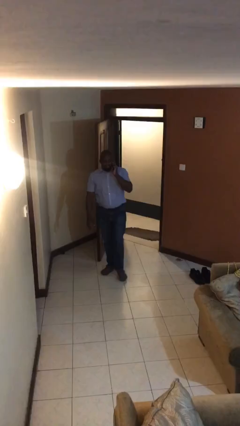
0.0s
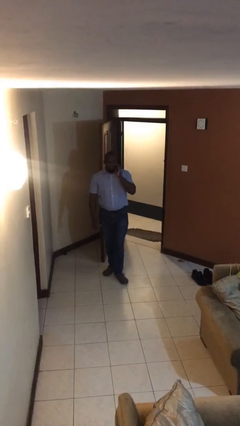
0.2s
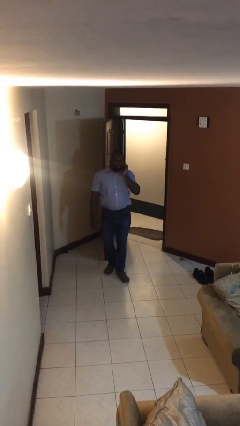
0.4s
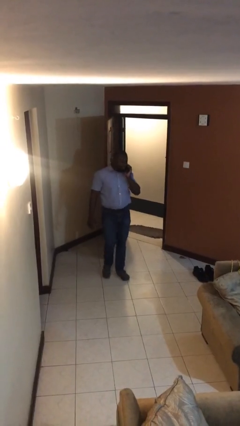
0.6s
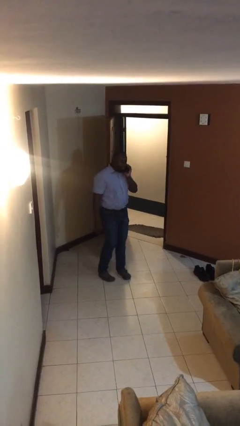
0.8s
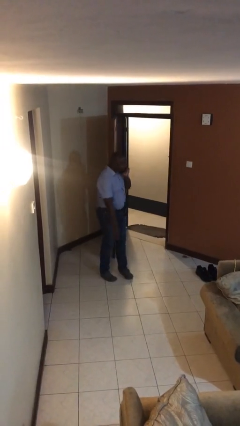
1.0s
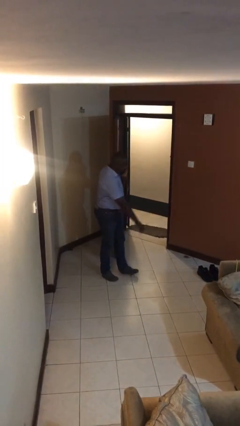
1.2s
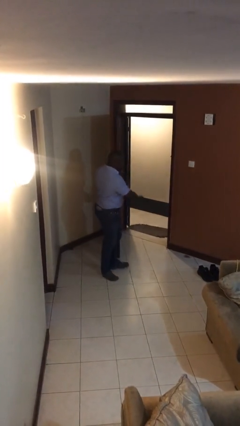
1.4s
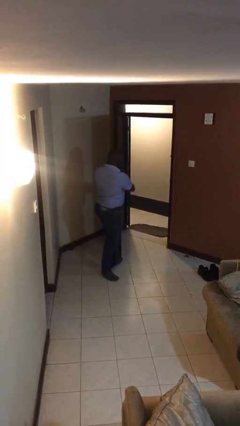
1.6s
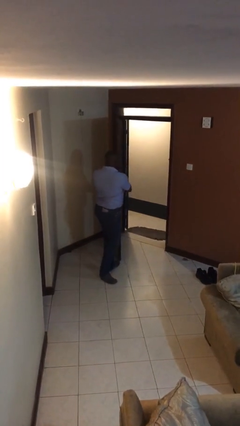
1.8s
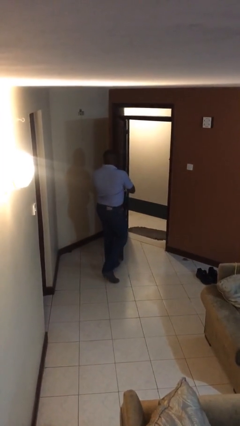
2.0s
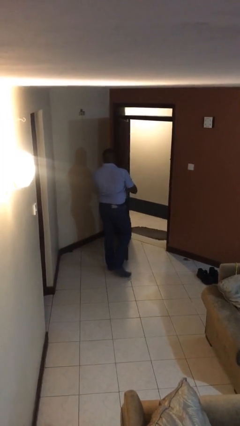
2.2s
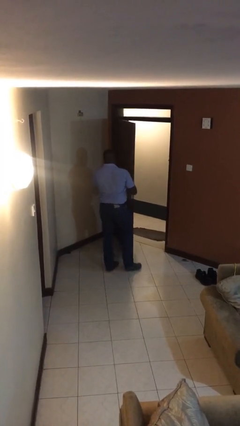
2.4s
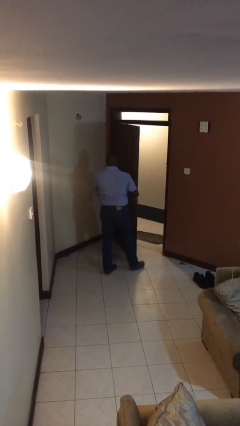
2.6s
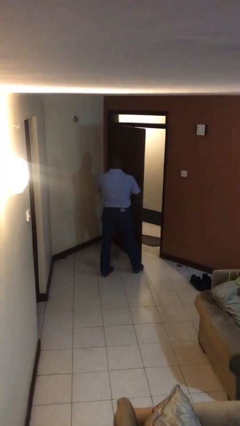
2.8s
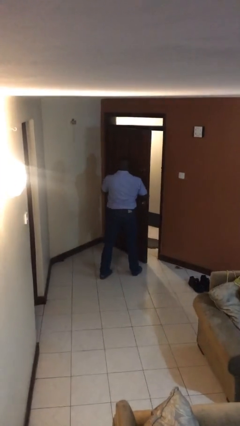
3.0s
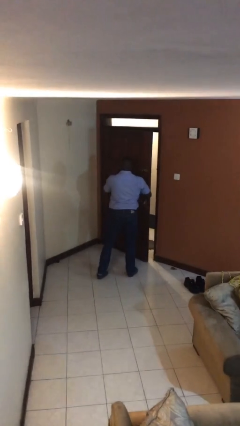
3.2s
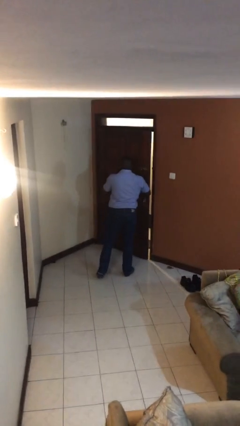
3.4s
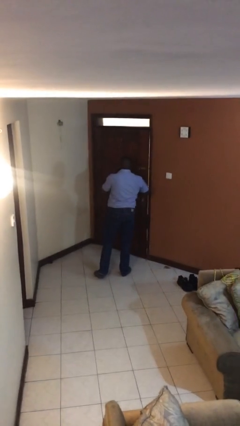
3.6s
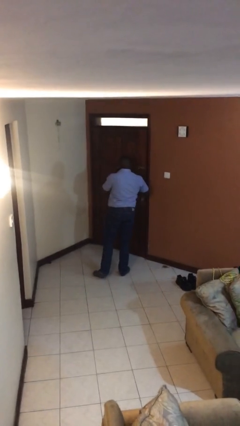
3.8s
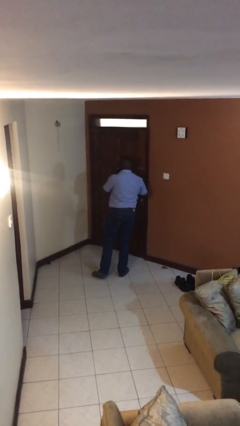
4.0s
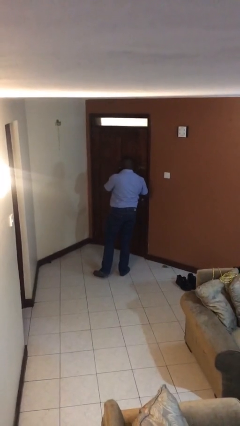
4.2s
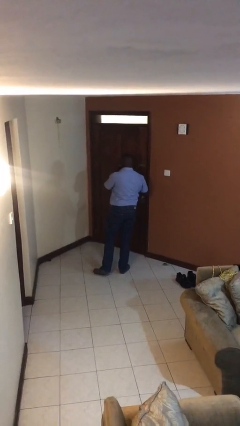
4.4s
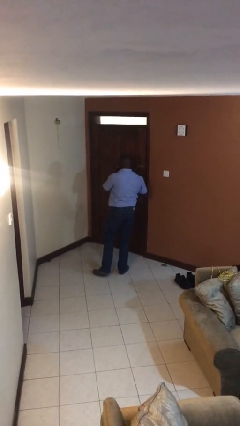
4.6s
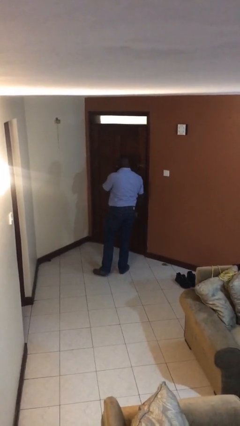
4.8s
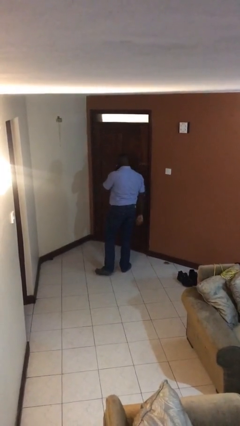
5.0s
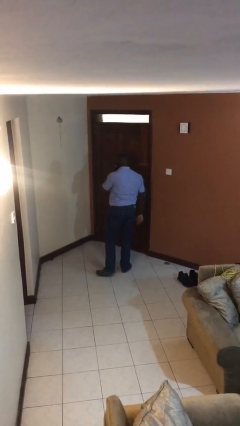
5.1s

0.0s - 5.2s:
person closes facility door

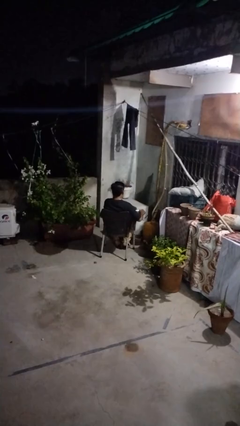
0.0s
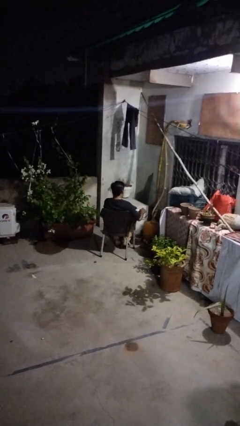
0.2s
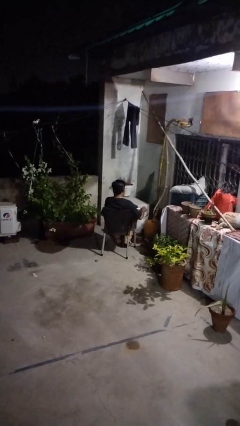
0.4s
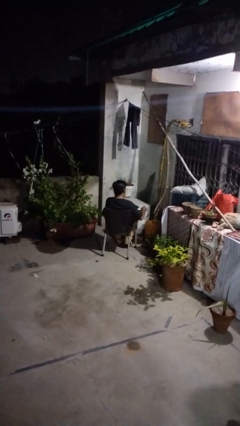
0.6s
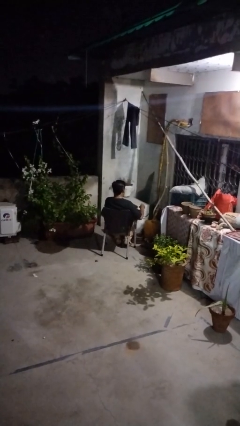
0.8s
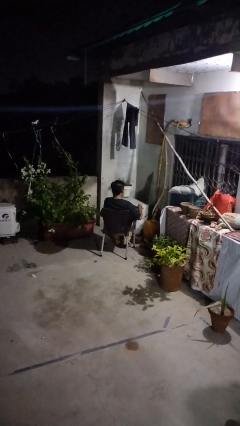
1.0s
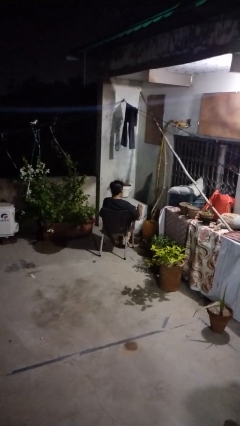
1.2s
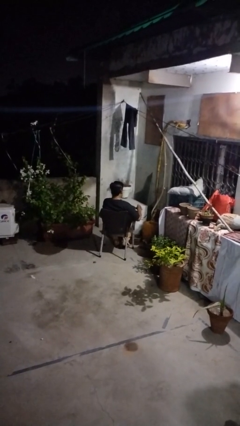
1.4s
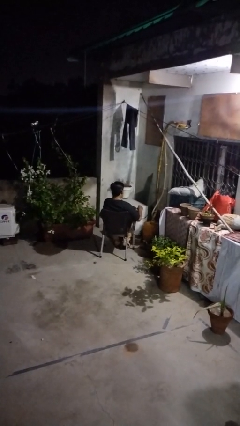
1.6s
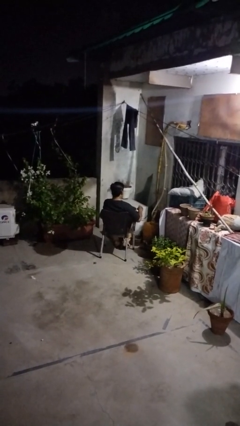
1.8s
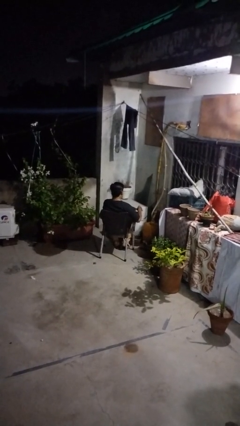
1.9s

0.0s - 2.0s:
person stirs mug

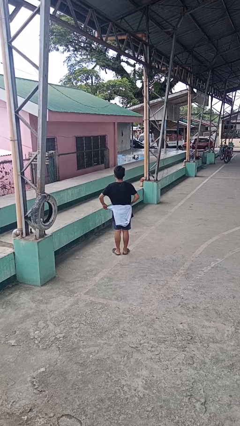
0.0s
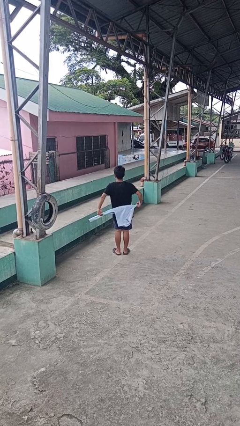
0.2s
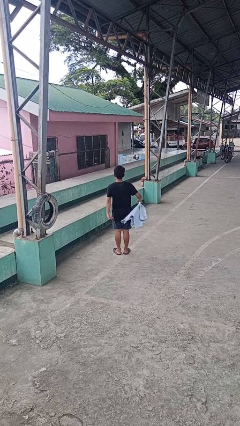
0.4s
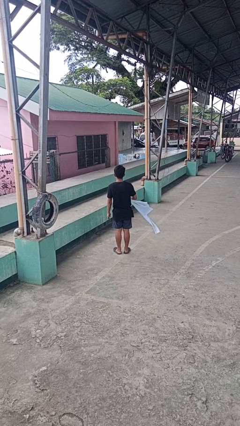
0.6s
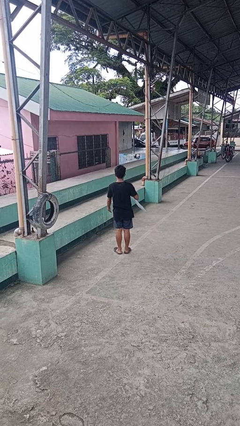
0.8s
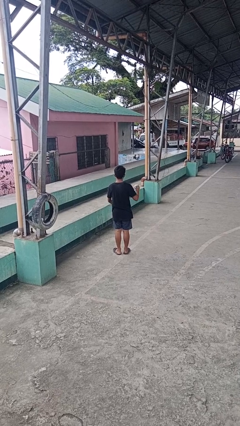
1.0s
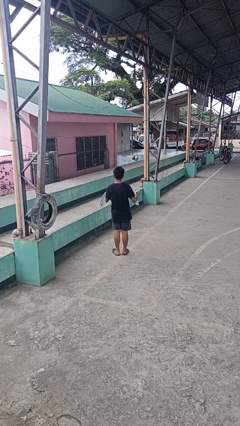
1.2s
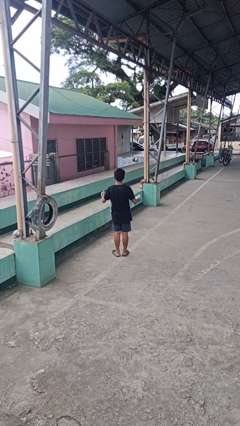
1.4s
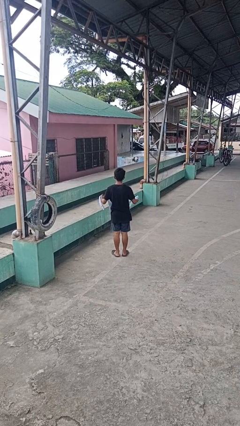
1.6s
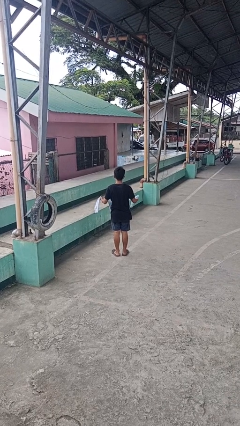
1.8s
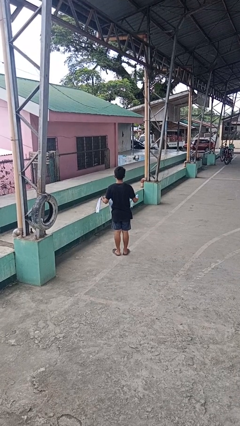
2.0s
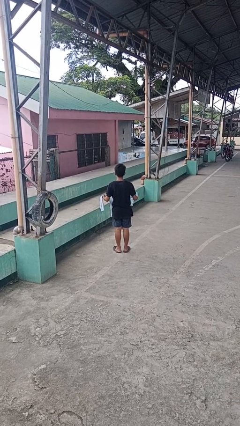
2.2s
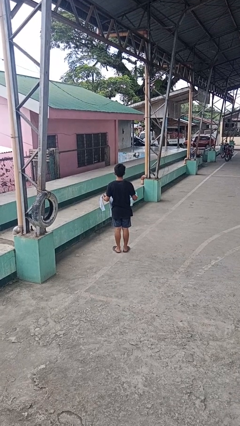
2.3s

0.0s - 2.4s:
person unties jacket around waist

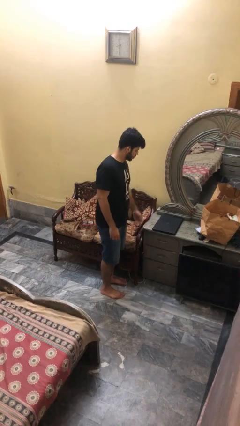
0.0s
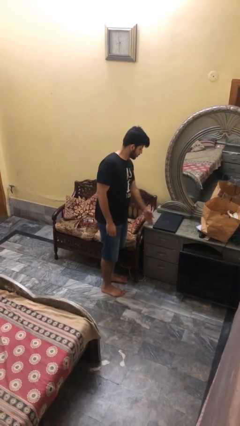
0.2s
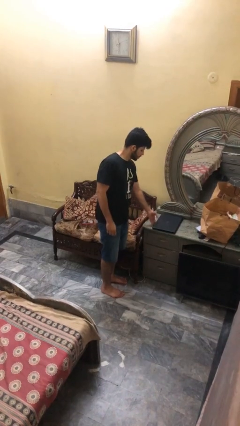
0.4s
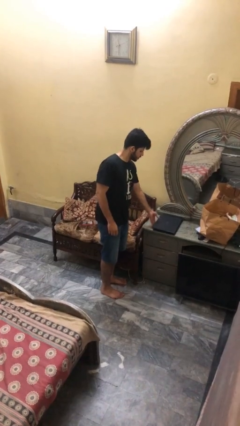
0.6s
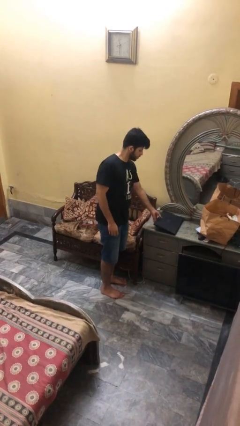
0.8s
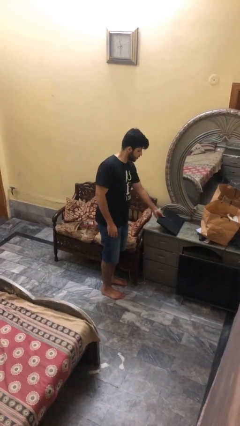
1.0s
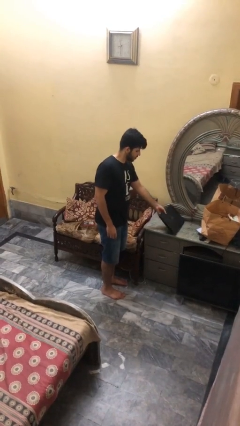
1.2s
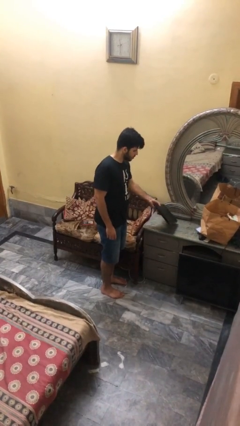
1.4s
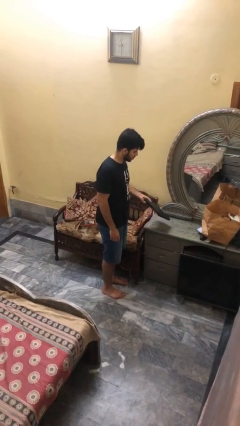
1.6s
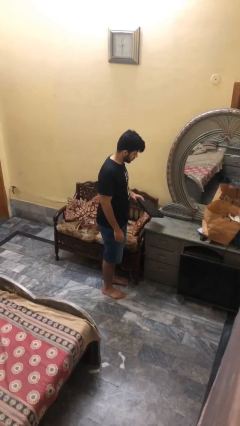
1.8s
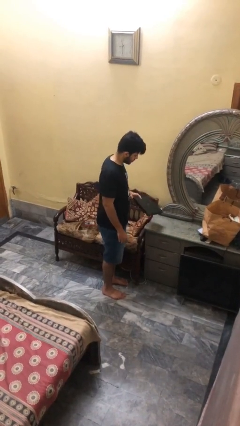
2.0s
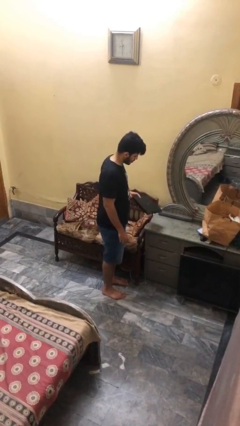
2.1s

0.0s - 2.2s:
person picks up object from countertop

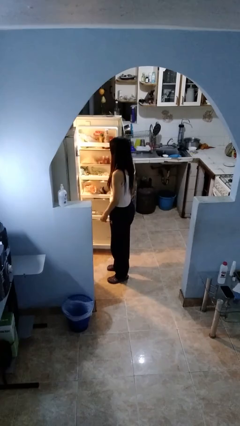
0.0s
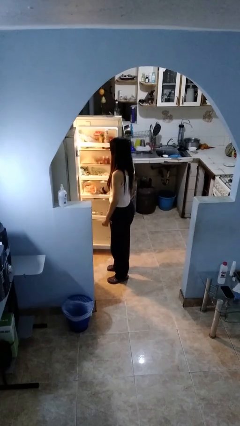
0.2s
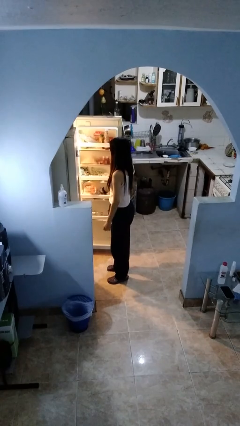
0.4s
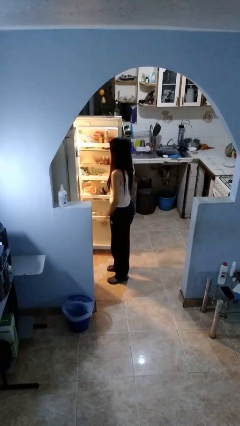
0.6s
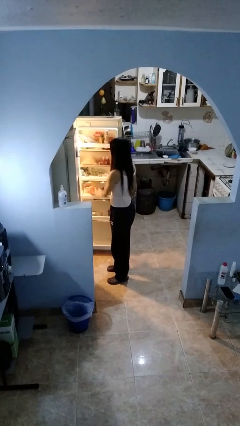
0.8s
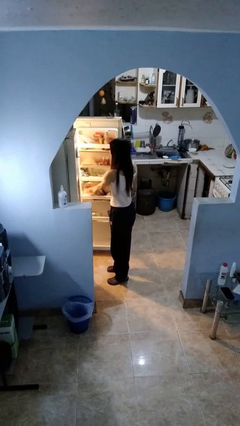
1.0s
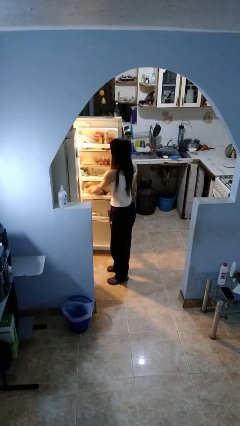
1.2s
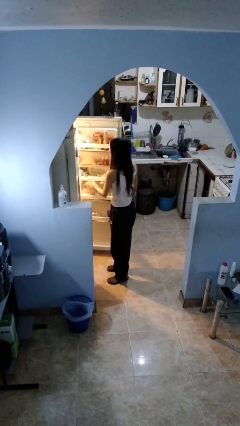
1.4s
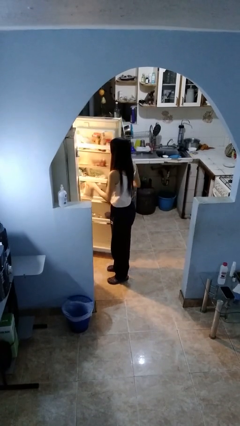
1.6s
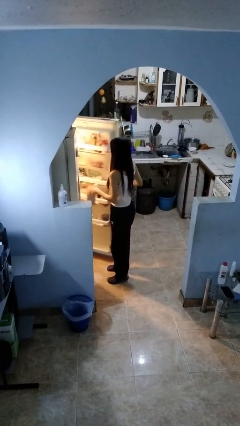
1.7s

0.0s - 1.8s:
person takes object from refrigerator

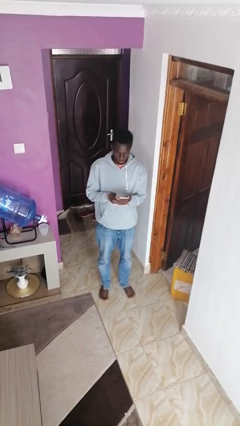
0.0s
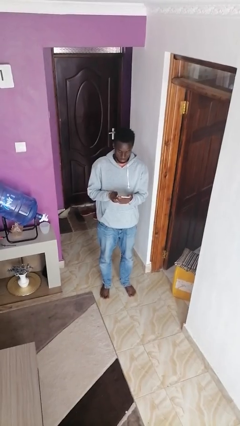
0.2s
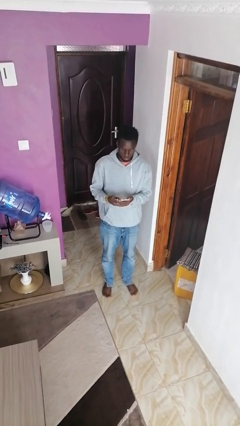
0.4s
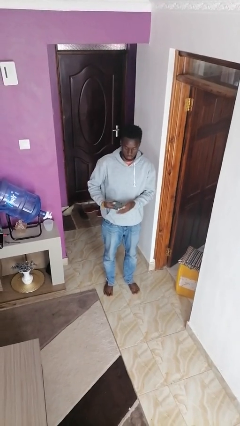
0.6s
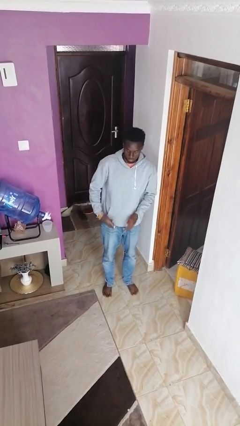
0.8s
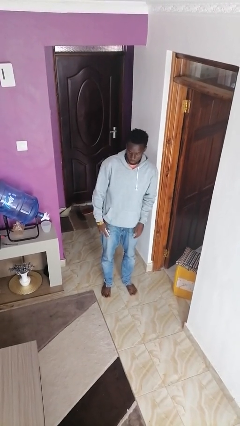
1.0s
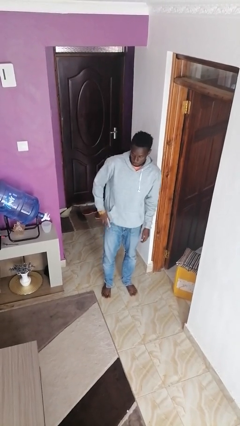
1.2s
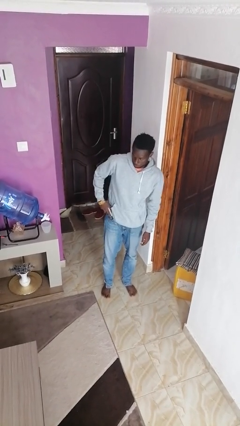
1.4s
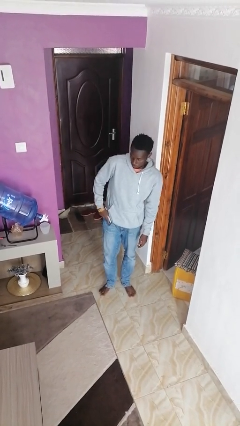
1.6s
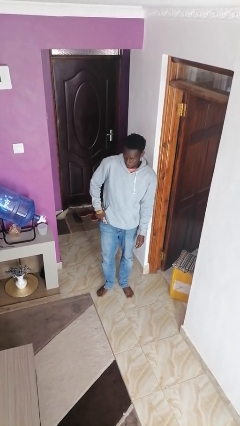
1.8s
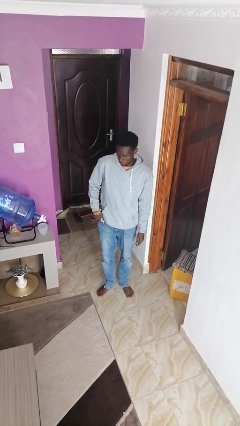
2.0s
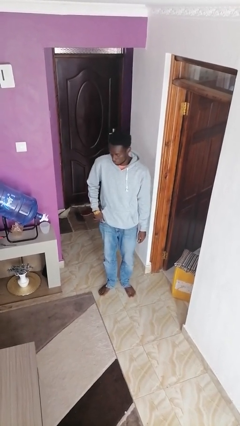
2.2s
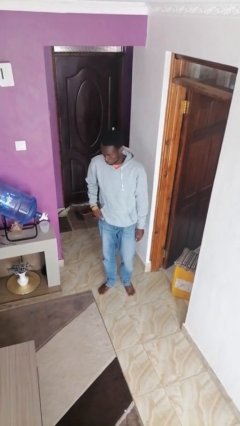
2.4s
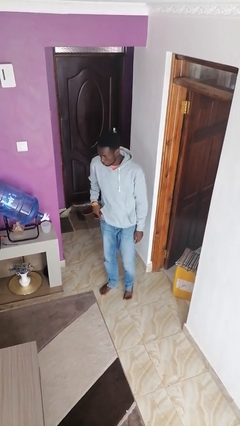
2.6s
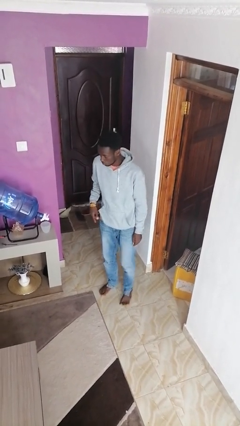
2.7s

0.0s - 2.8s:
person puts phone into pocket

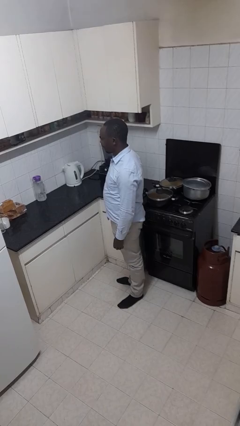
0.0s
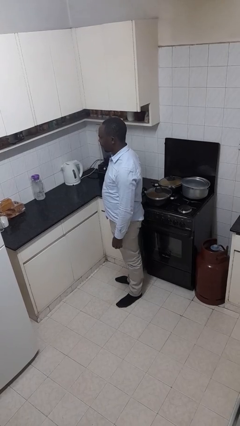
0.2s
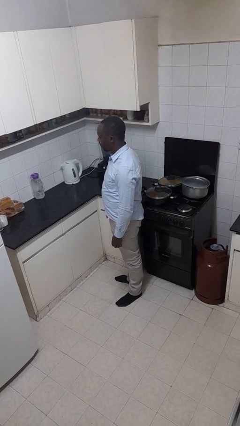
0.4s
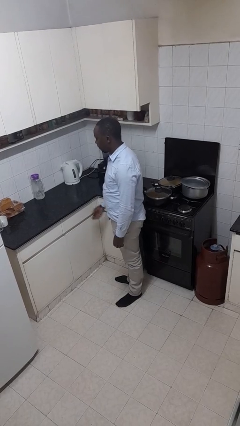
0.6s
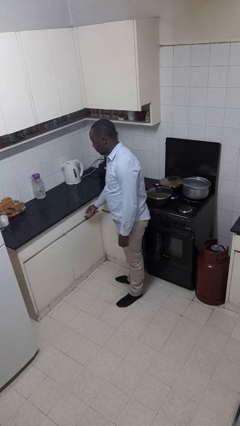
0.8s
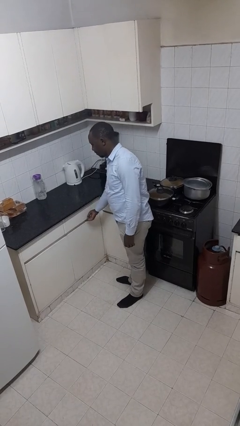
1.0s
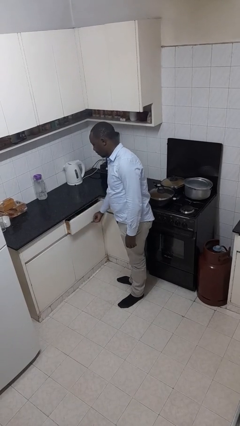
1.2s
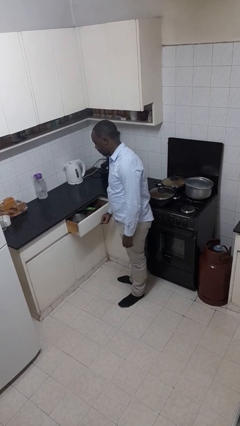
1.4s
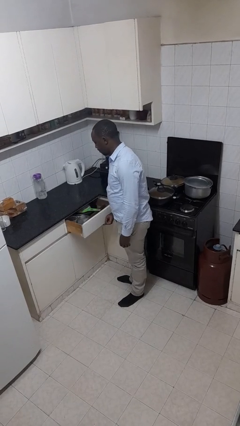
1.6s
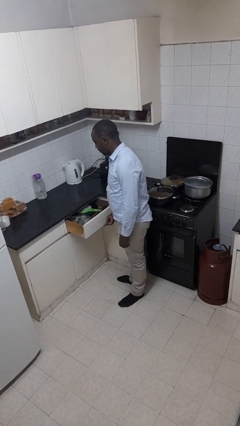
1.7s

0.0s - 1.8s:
person opens kitchen drawer
